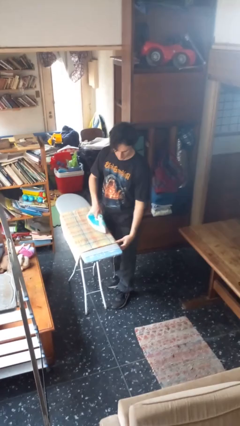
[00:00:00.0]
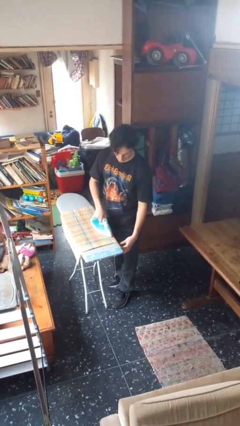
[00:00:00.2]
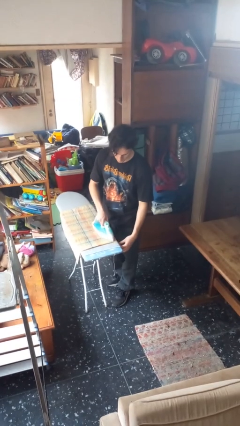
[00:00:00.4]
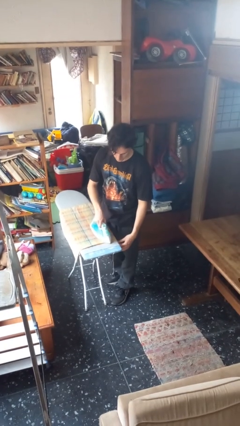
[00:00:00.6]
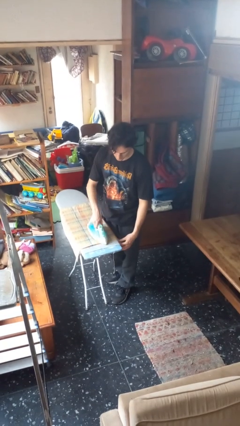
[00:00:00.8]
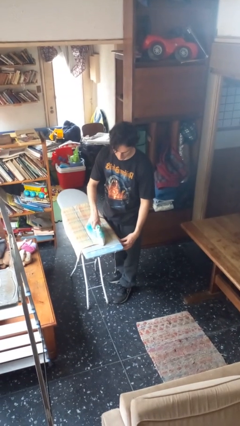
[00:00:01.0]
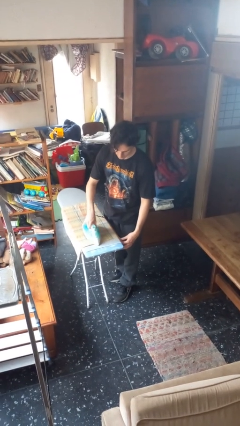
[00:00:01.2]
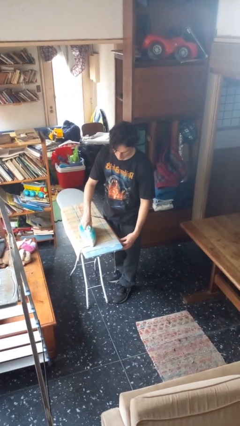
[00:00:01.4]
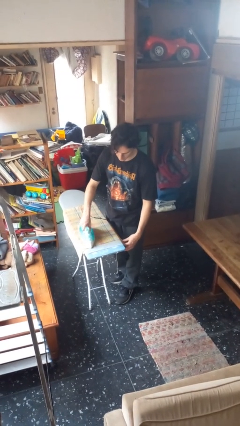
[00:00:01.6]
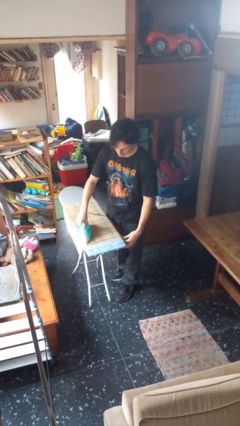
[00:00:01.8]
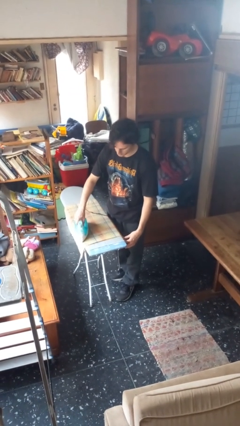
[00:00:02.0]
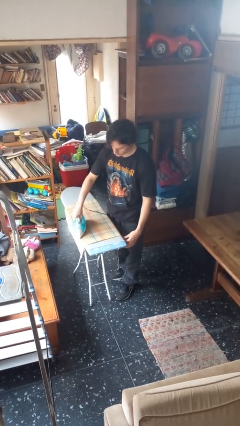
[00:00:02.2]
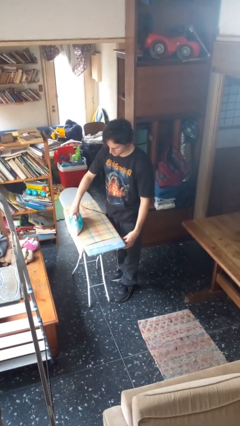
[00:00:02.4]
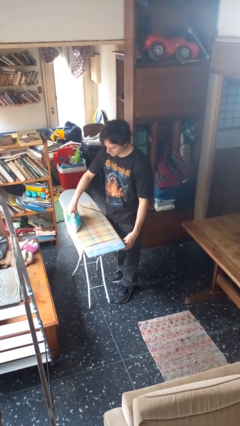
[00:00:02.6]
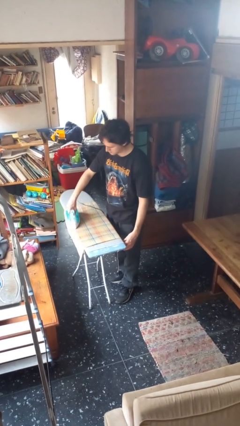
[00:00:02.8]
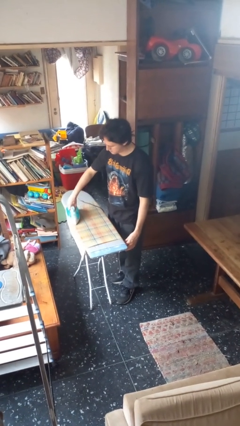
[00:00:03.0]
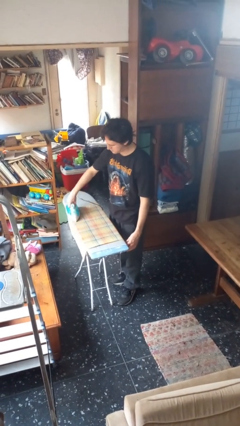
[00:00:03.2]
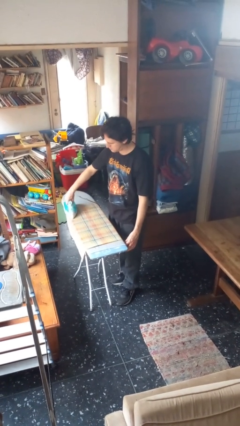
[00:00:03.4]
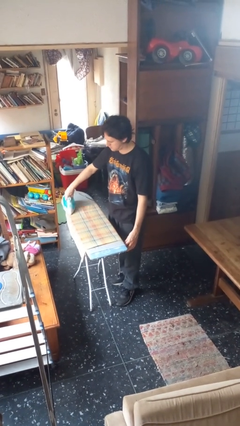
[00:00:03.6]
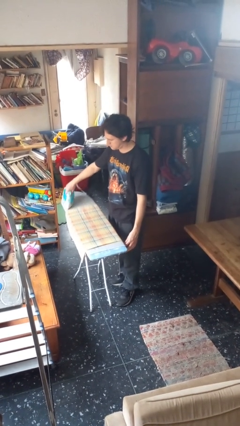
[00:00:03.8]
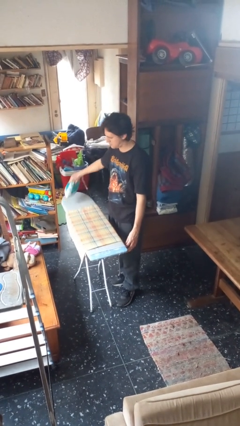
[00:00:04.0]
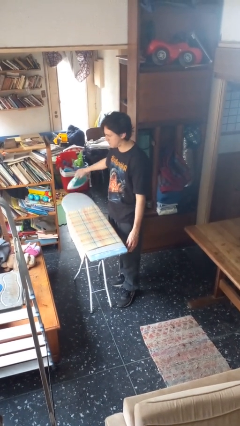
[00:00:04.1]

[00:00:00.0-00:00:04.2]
person irons clothes

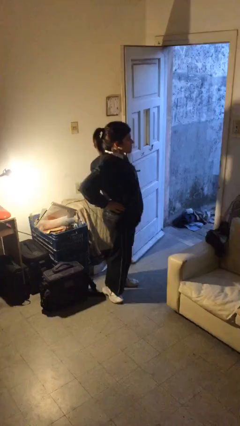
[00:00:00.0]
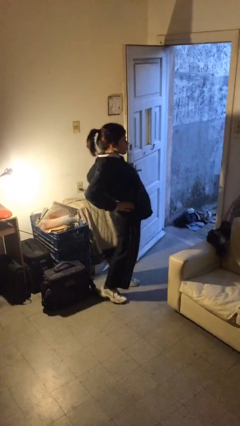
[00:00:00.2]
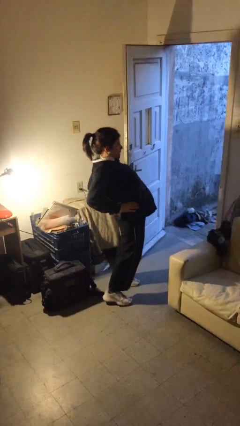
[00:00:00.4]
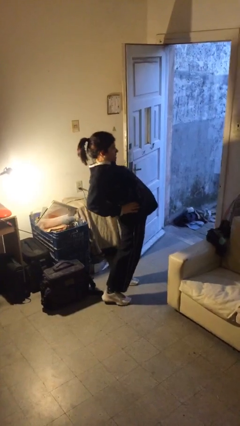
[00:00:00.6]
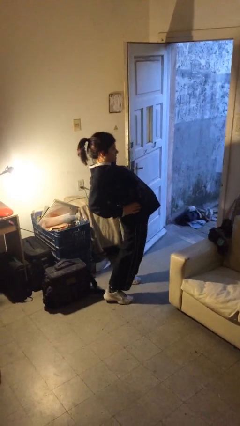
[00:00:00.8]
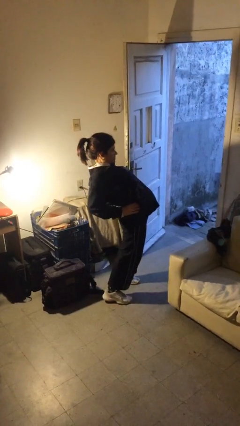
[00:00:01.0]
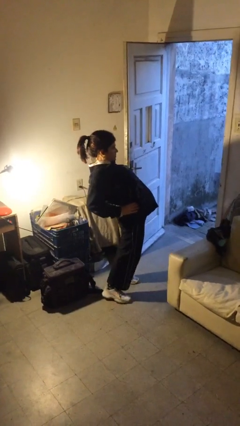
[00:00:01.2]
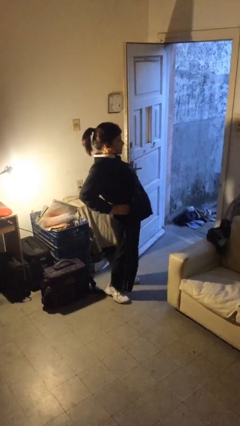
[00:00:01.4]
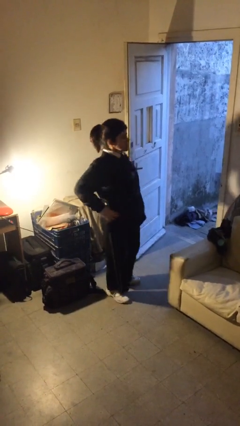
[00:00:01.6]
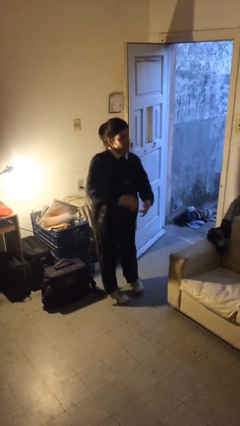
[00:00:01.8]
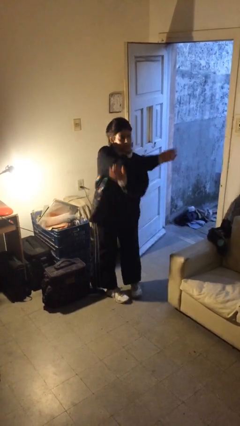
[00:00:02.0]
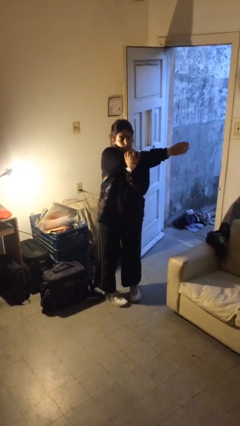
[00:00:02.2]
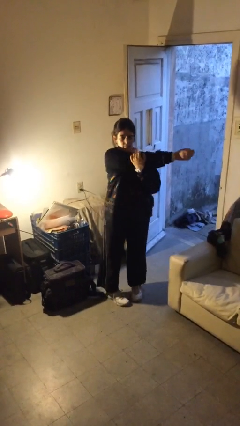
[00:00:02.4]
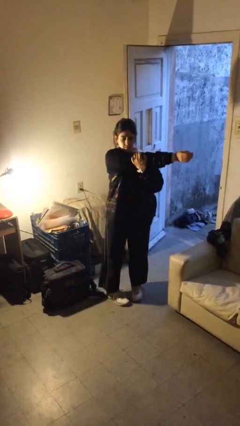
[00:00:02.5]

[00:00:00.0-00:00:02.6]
person stretches back

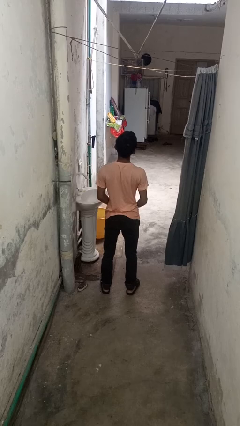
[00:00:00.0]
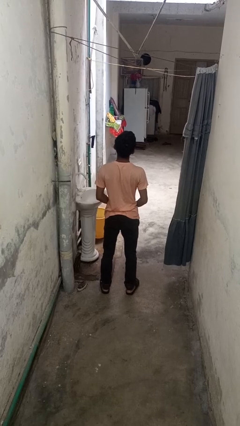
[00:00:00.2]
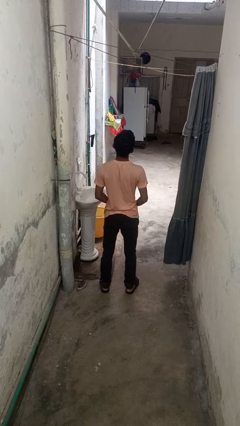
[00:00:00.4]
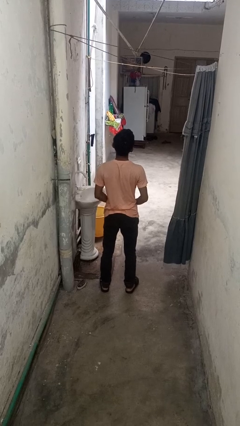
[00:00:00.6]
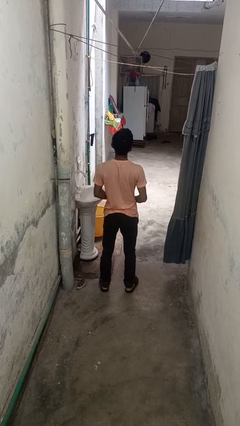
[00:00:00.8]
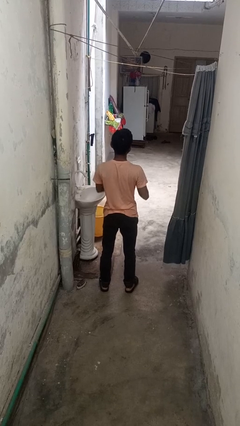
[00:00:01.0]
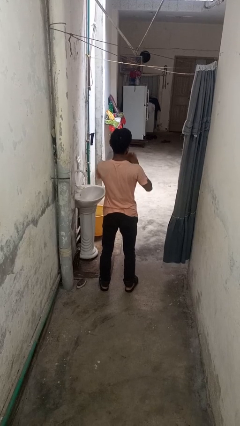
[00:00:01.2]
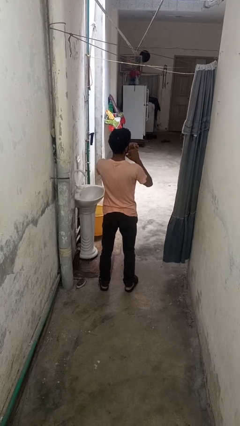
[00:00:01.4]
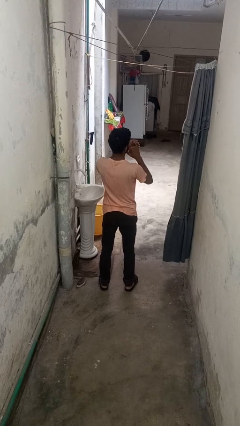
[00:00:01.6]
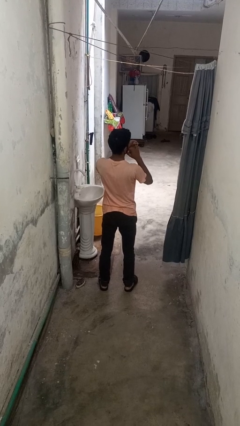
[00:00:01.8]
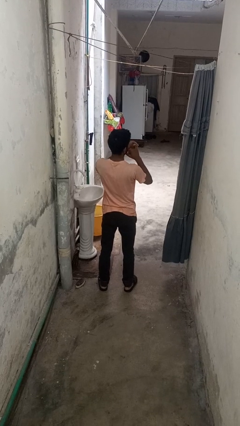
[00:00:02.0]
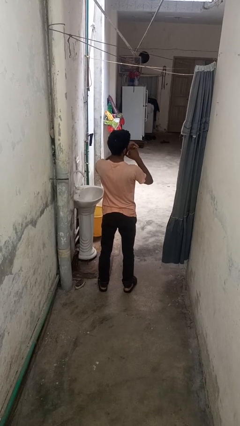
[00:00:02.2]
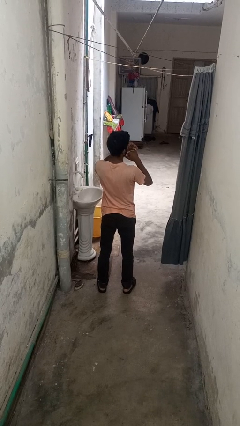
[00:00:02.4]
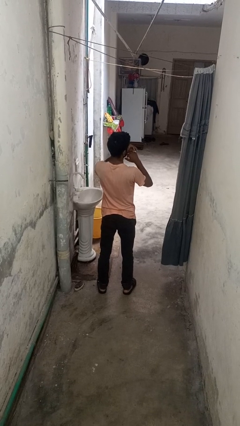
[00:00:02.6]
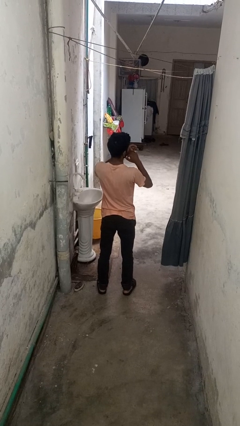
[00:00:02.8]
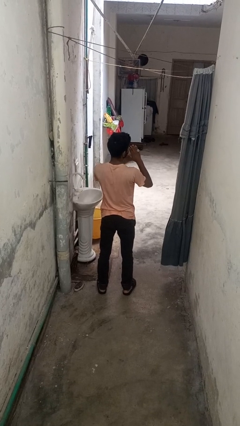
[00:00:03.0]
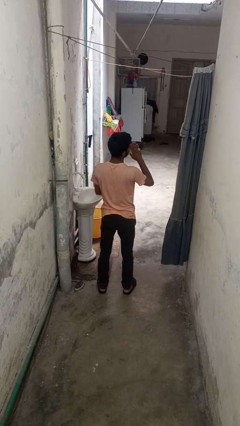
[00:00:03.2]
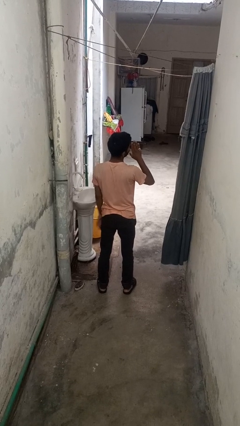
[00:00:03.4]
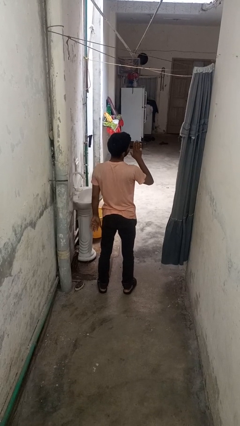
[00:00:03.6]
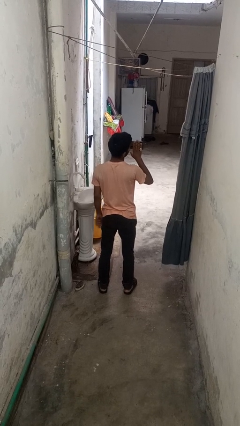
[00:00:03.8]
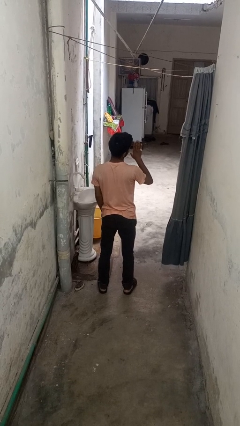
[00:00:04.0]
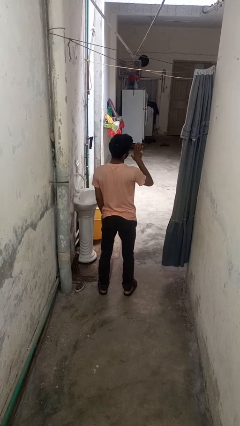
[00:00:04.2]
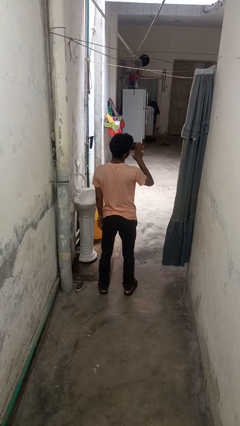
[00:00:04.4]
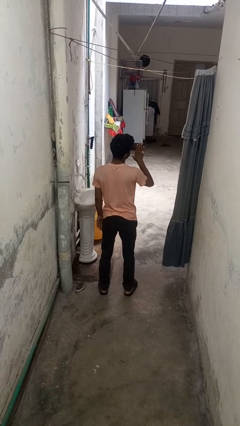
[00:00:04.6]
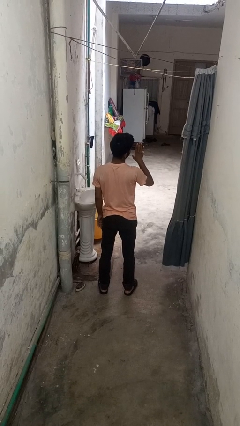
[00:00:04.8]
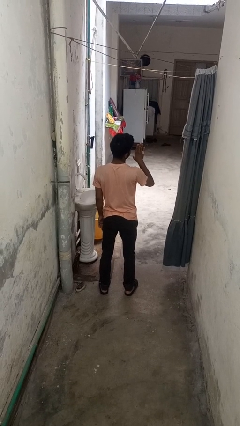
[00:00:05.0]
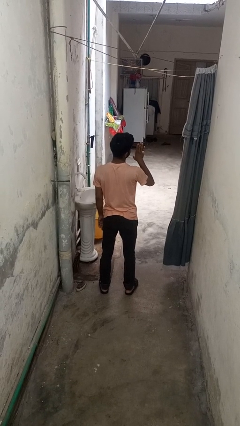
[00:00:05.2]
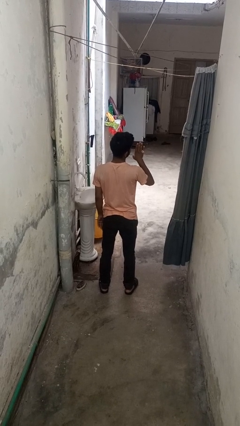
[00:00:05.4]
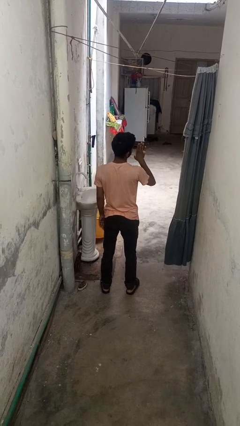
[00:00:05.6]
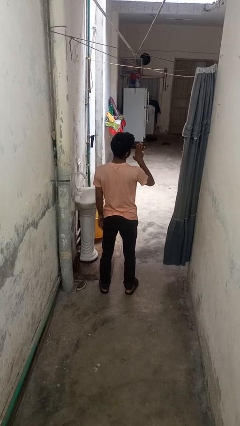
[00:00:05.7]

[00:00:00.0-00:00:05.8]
person puts on ring

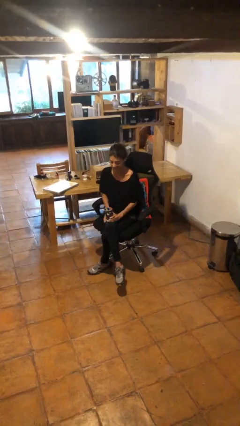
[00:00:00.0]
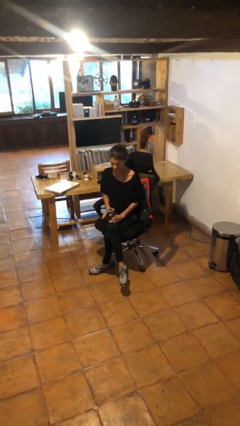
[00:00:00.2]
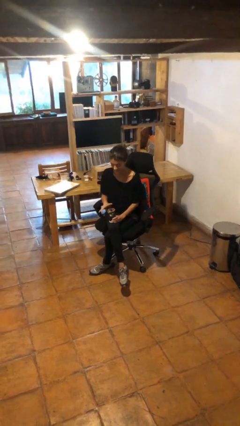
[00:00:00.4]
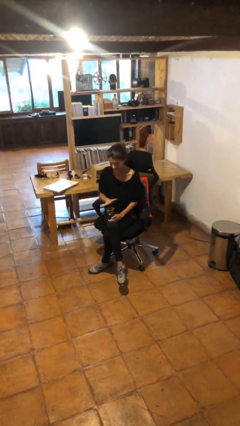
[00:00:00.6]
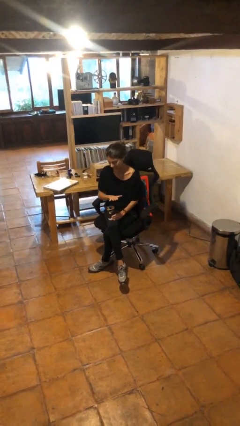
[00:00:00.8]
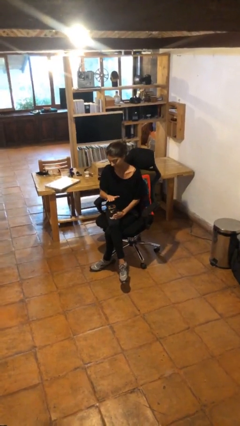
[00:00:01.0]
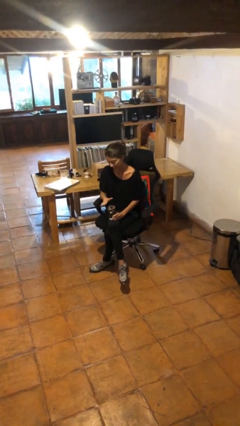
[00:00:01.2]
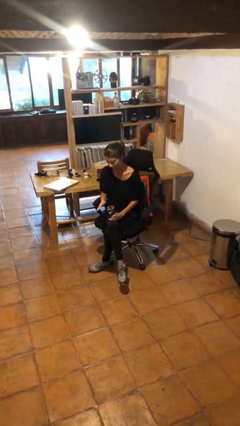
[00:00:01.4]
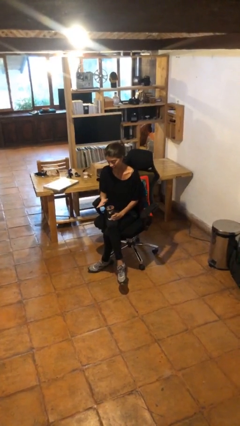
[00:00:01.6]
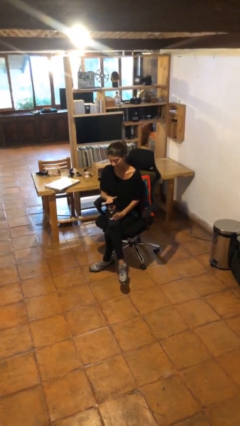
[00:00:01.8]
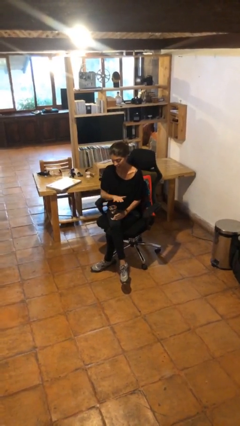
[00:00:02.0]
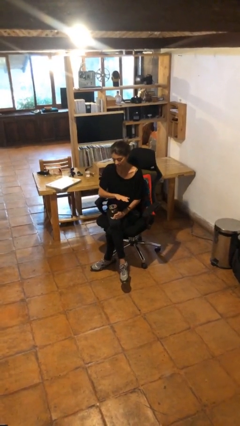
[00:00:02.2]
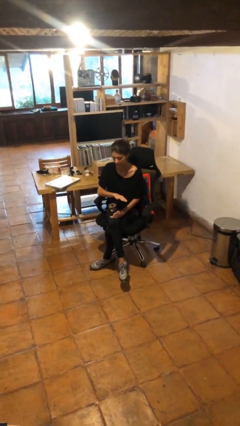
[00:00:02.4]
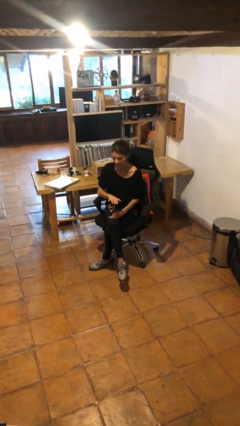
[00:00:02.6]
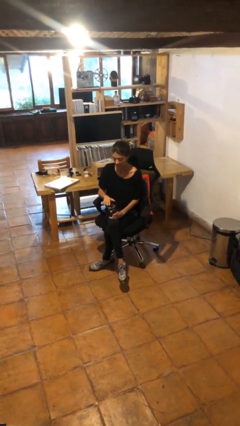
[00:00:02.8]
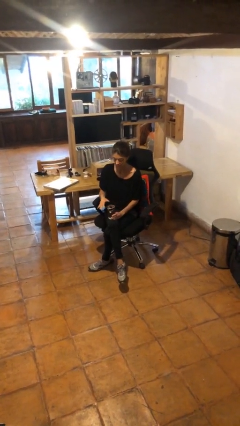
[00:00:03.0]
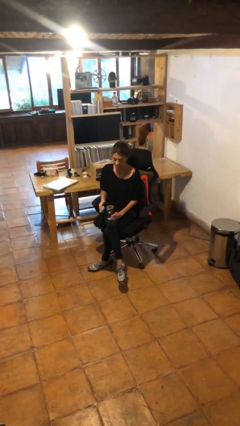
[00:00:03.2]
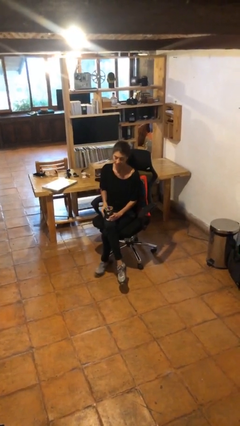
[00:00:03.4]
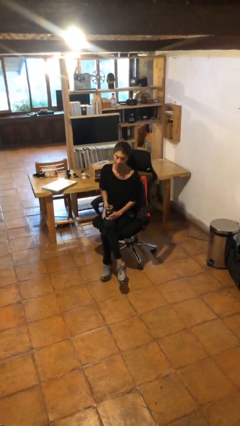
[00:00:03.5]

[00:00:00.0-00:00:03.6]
person waves hand over object

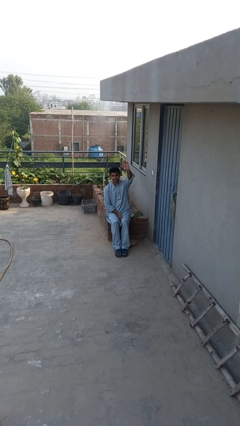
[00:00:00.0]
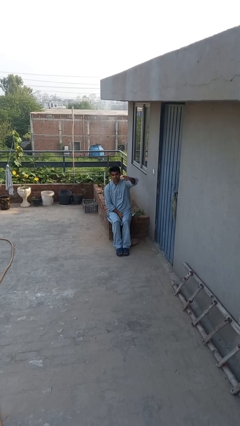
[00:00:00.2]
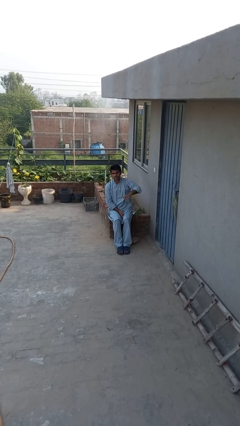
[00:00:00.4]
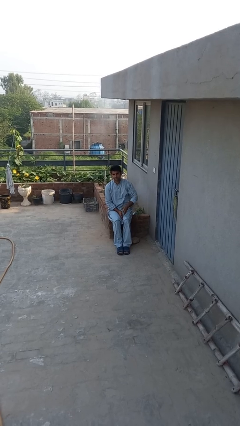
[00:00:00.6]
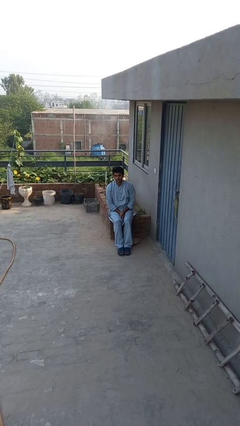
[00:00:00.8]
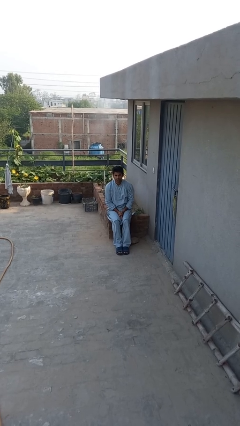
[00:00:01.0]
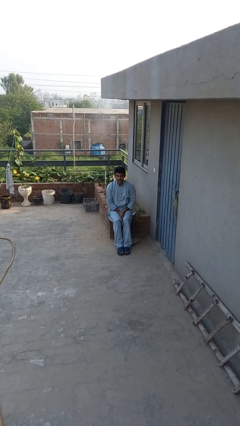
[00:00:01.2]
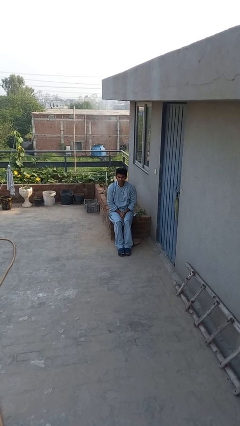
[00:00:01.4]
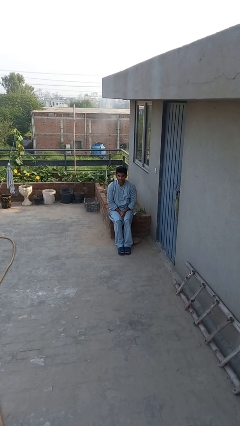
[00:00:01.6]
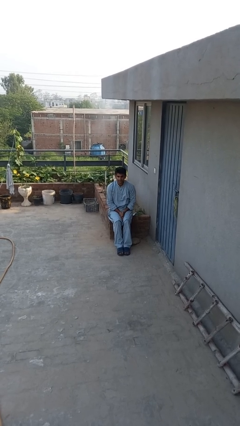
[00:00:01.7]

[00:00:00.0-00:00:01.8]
person gestures lower hand
